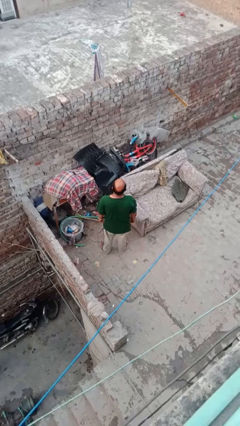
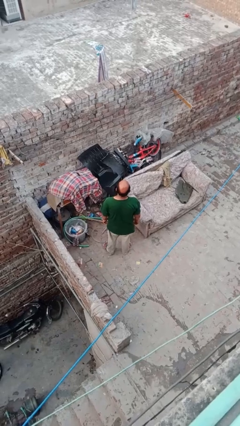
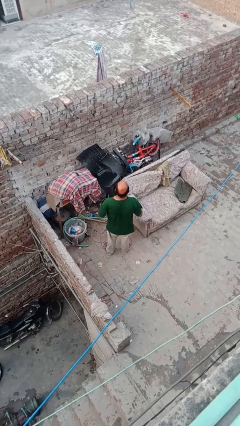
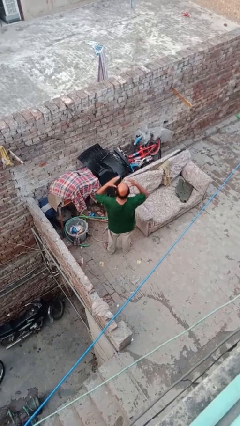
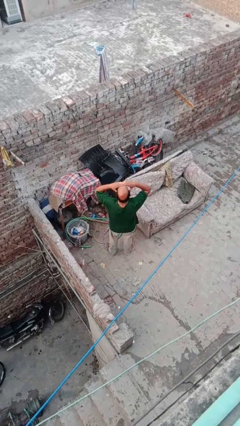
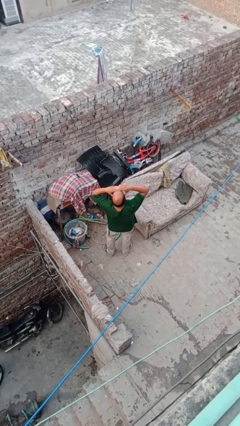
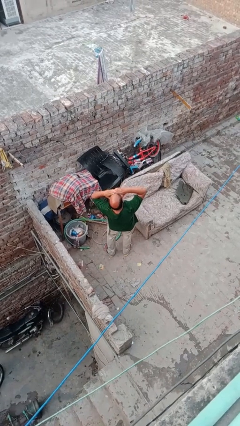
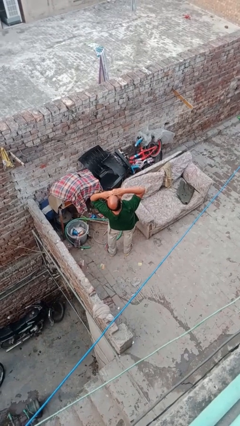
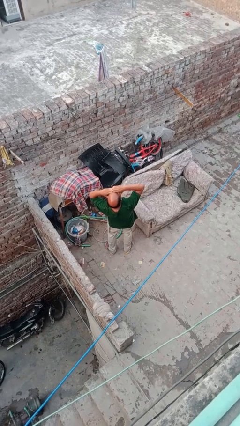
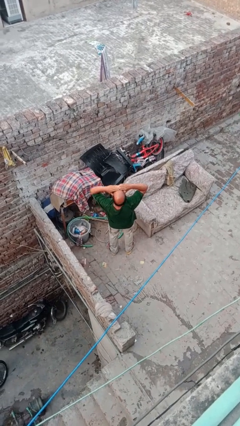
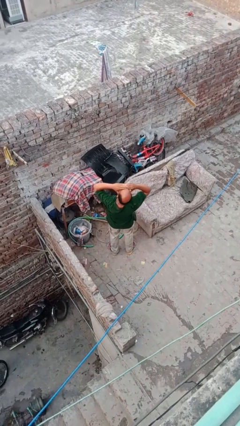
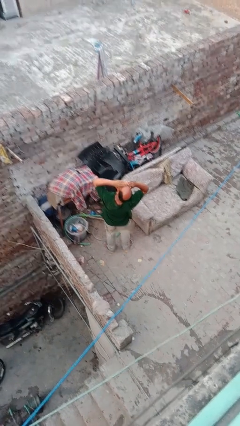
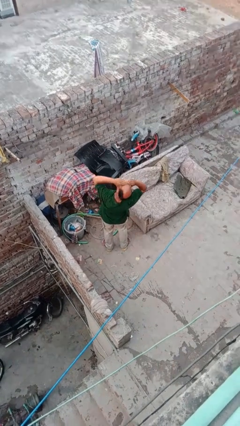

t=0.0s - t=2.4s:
person shades eyes

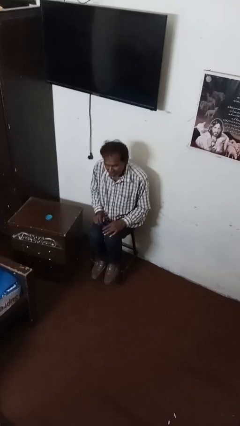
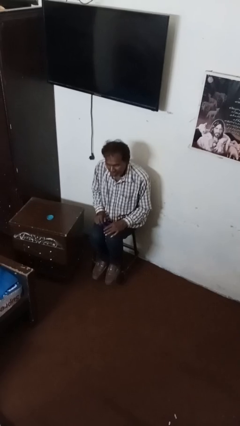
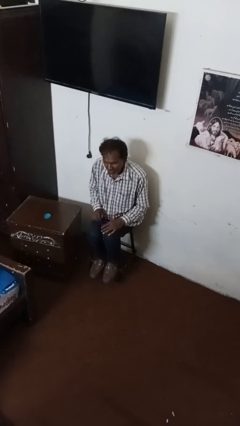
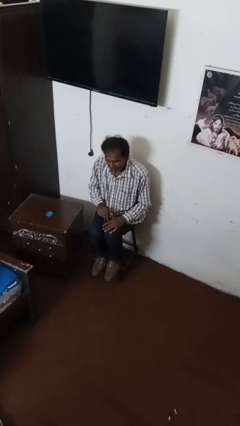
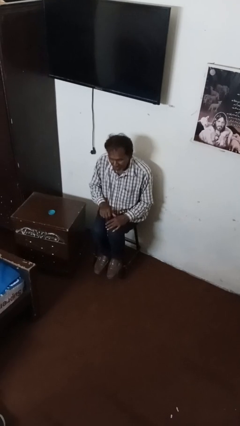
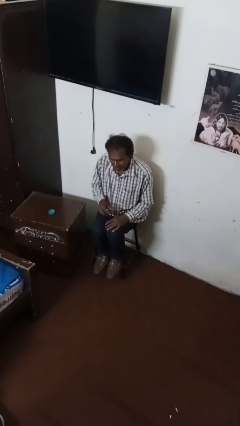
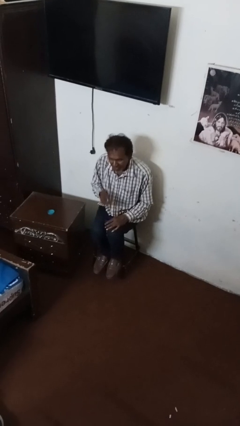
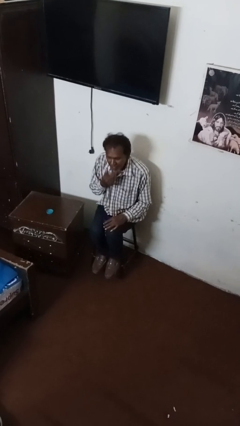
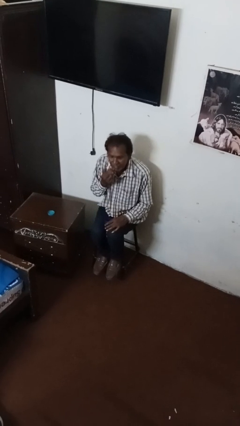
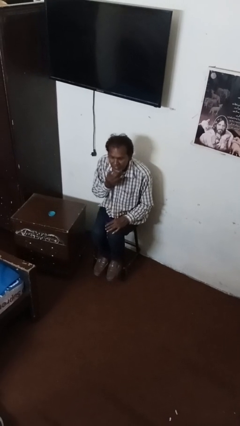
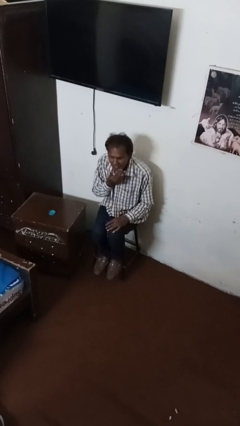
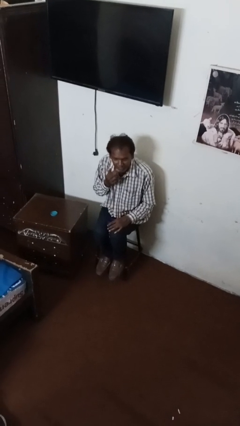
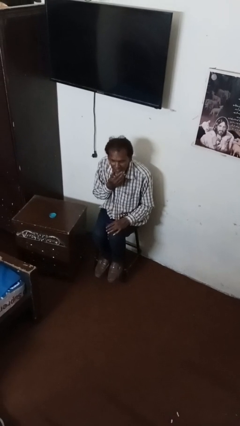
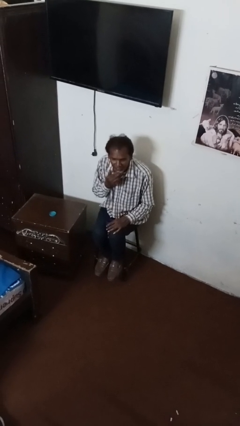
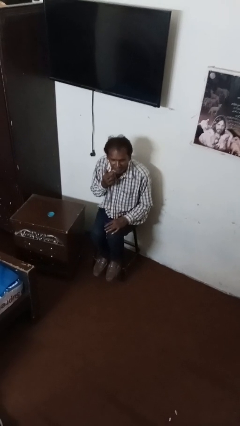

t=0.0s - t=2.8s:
person strokes chin

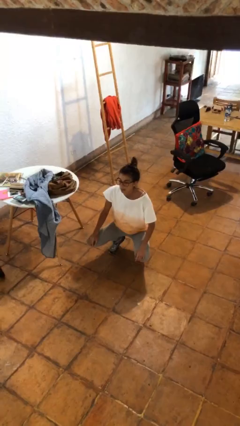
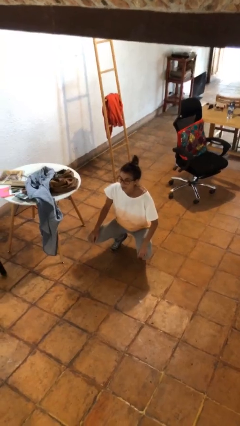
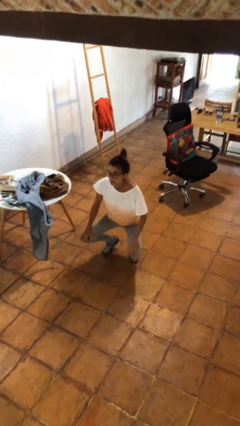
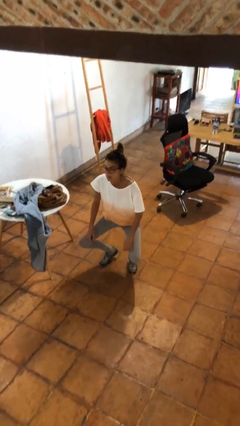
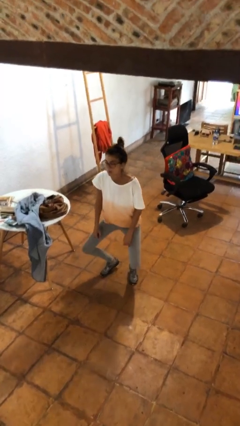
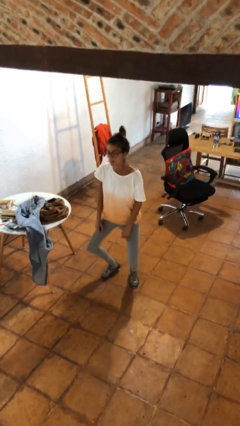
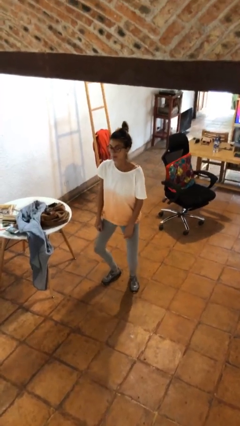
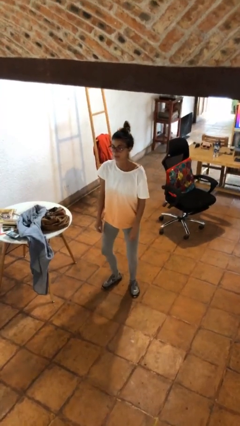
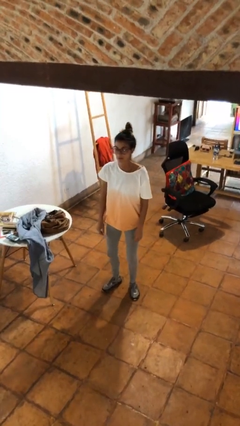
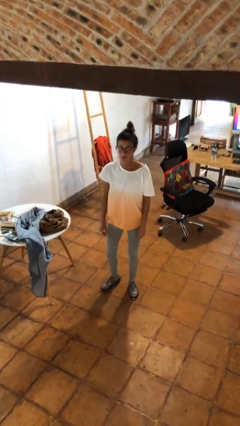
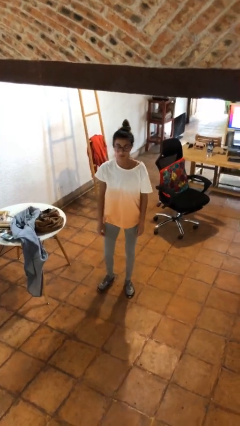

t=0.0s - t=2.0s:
person stands up

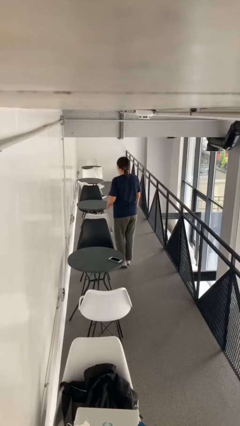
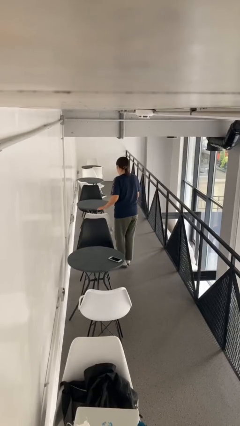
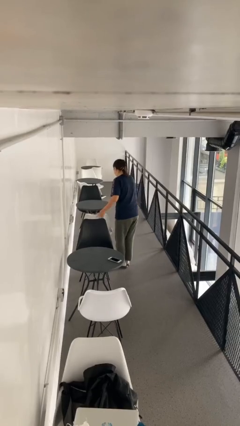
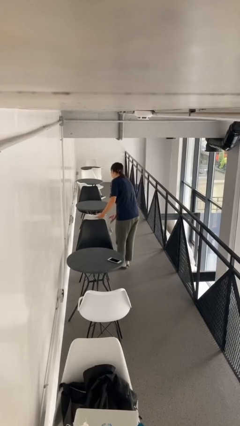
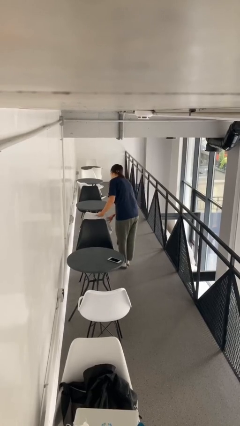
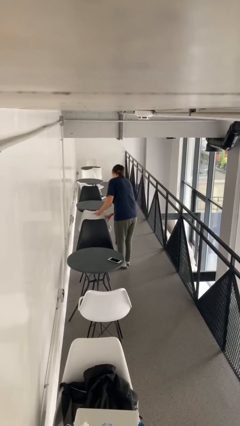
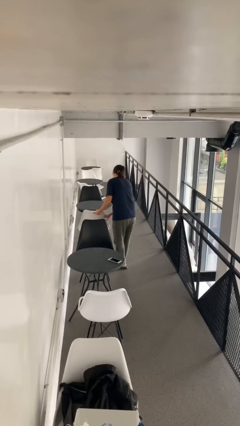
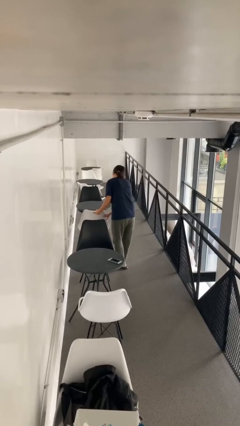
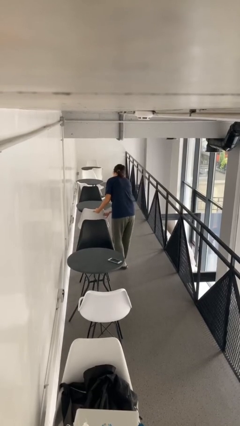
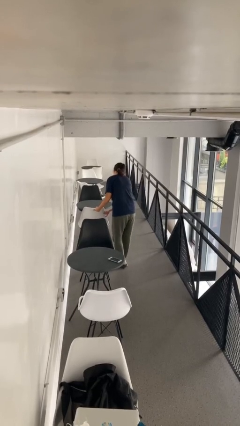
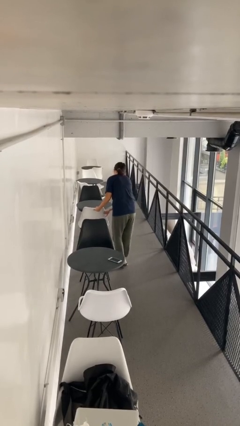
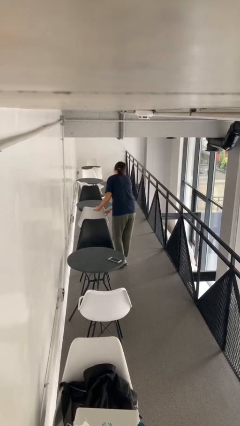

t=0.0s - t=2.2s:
person pushes in chair

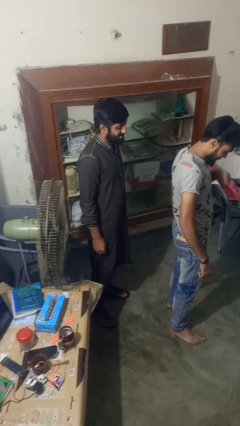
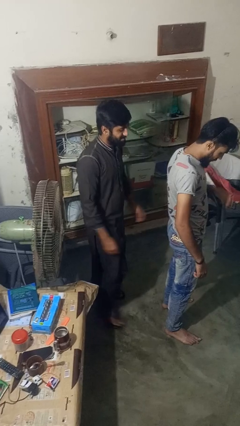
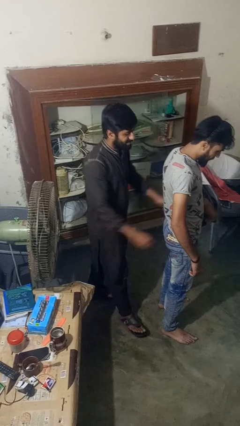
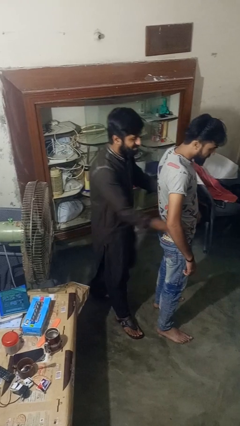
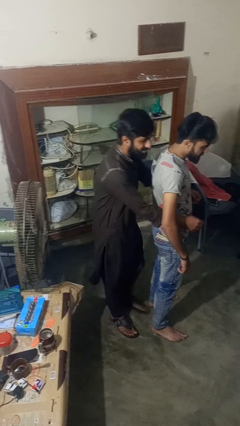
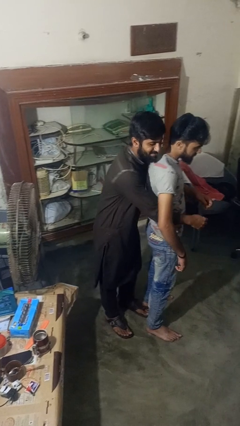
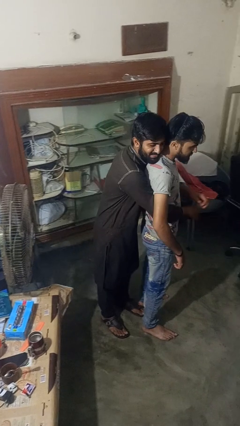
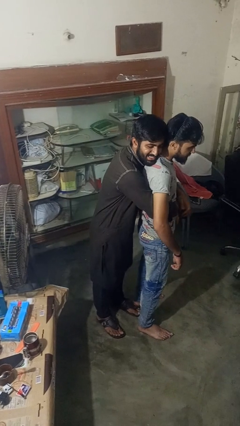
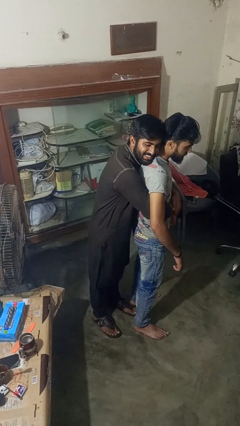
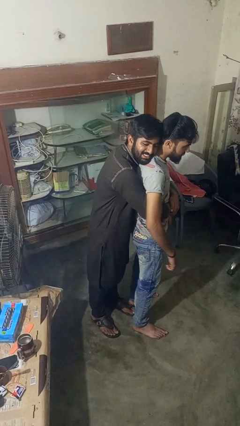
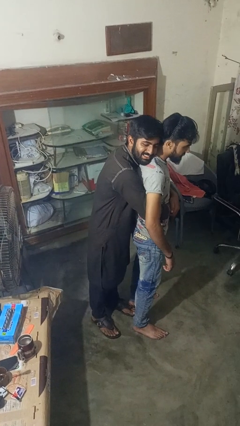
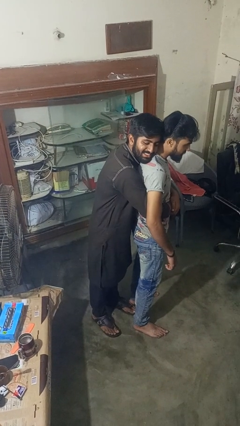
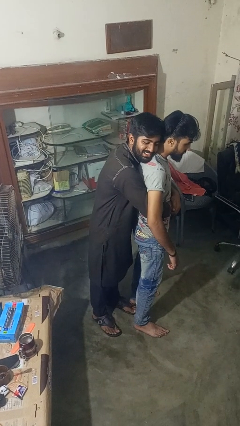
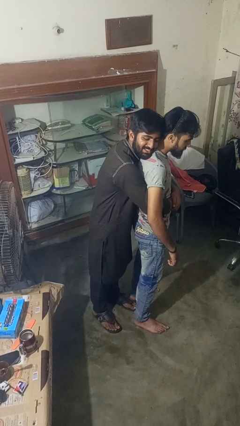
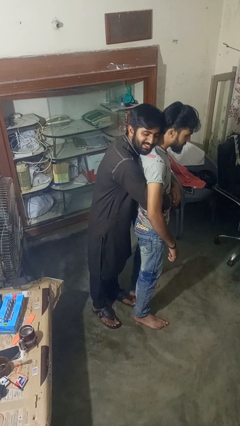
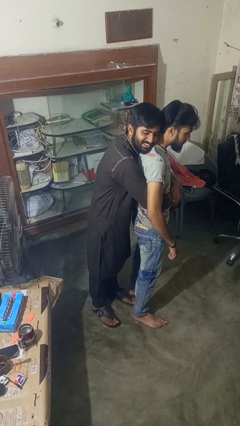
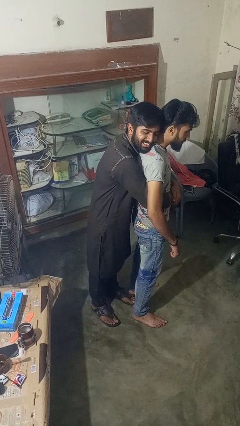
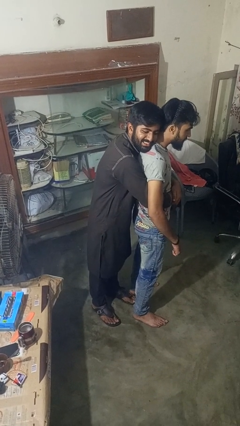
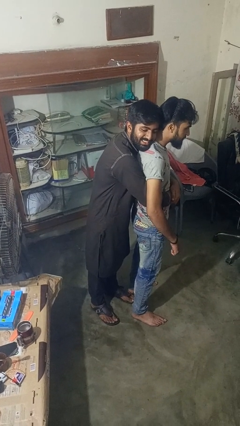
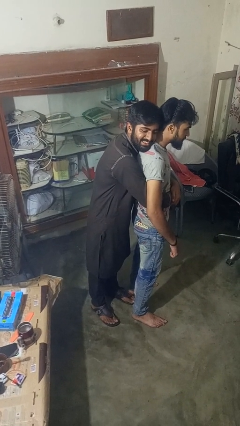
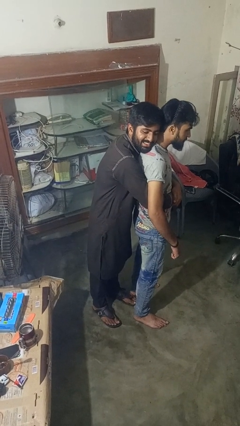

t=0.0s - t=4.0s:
person hugs person from behind

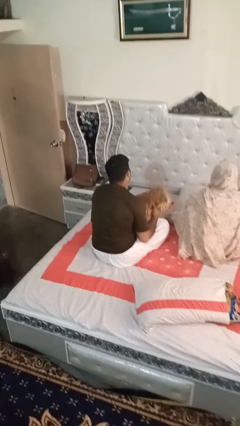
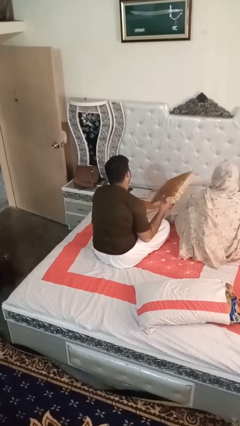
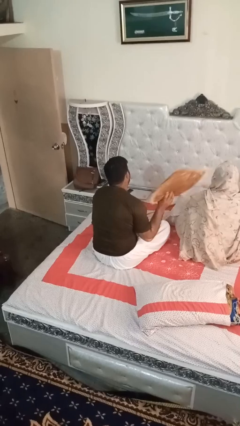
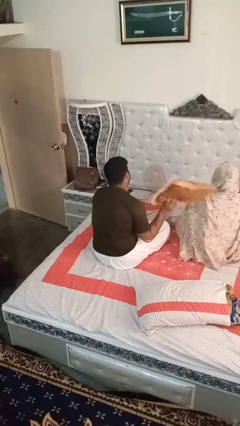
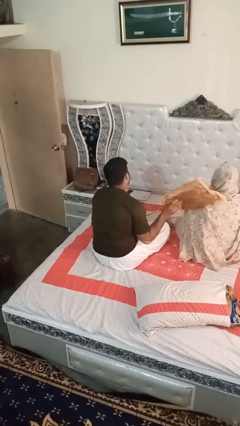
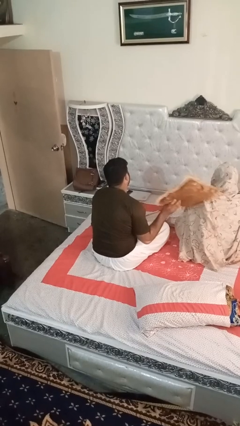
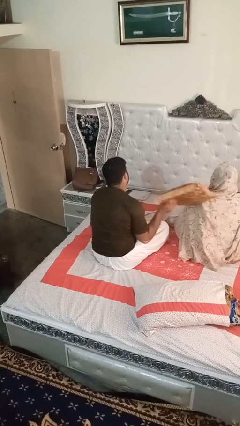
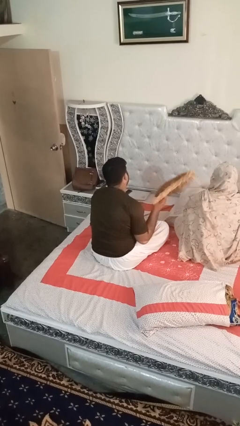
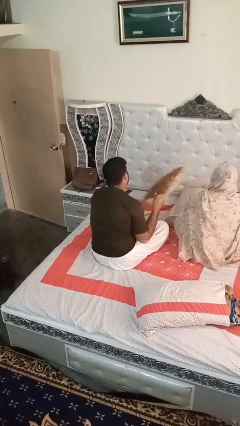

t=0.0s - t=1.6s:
person hits person with pillow

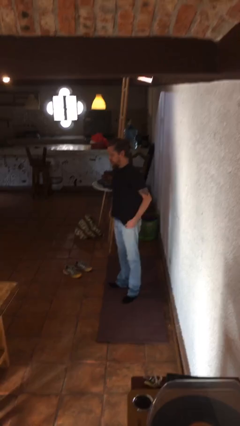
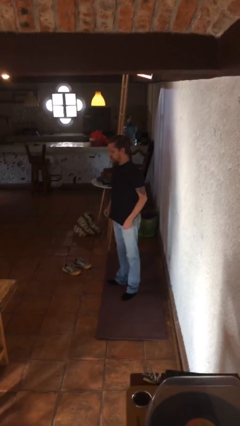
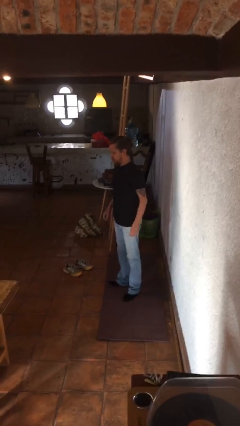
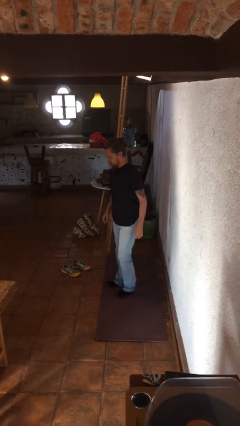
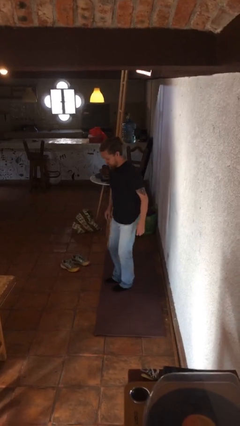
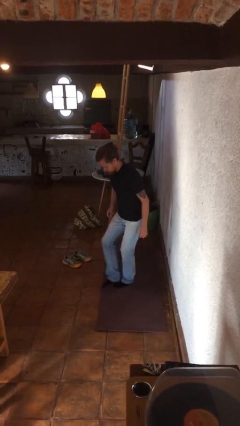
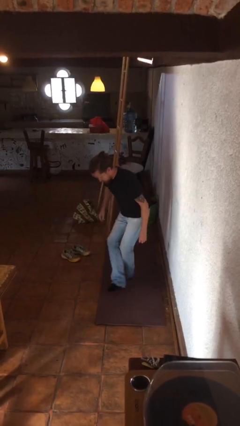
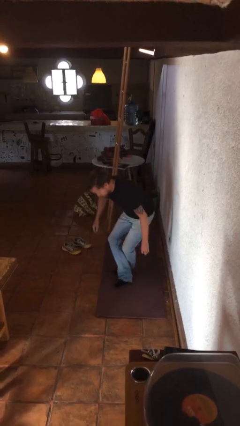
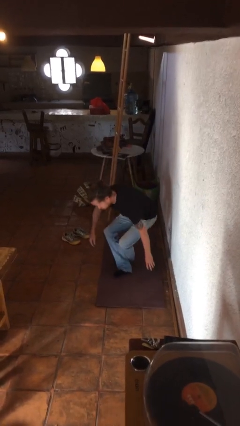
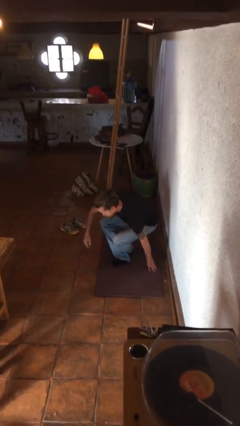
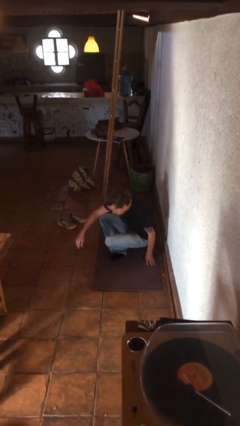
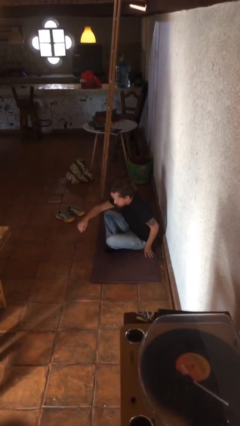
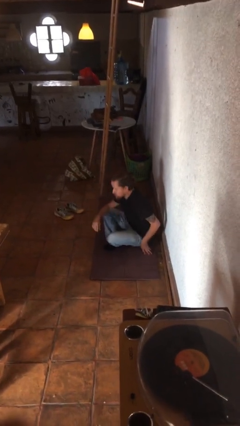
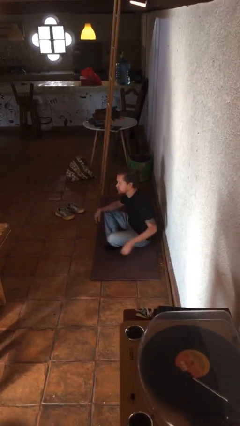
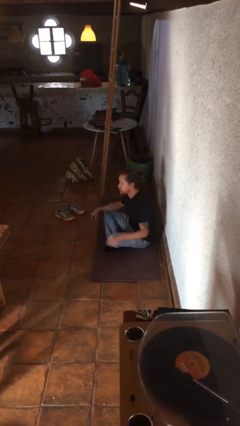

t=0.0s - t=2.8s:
person sits crisscross
